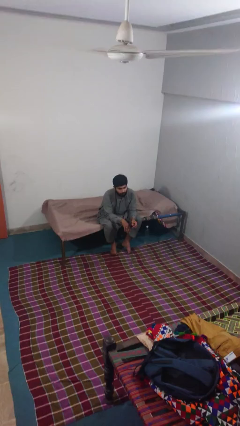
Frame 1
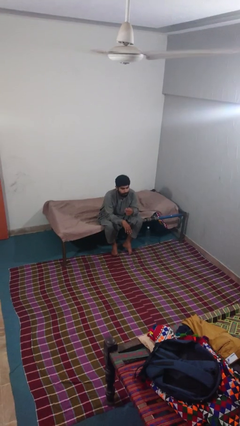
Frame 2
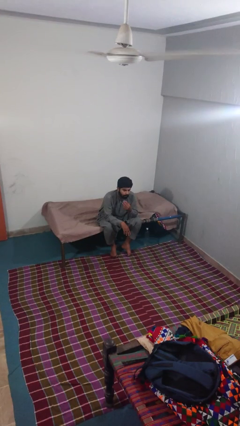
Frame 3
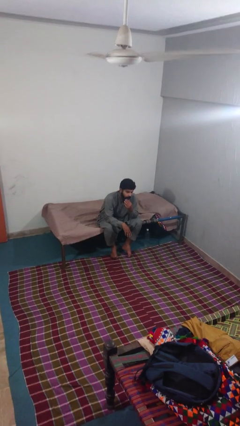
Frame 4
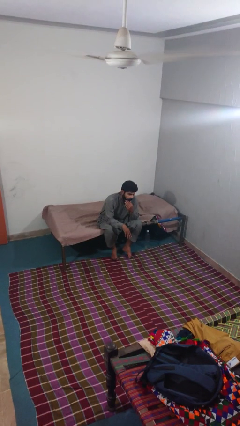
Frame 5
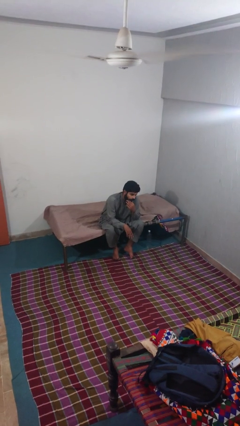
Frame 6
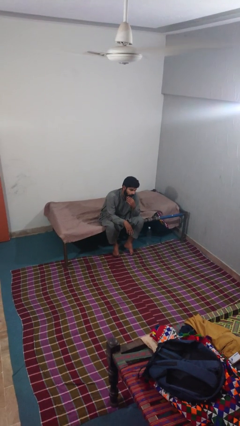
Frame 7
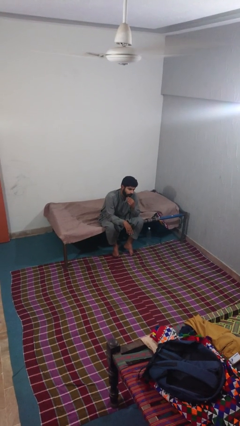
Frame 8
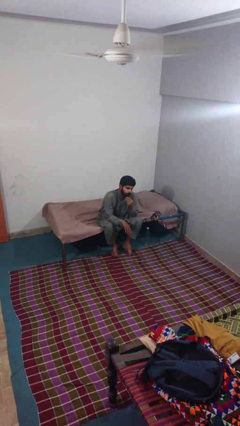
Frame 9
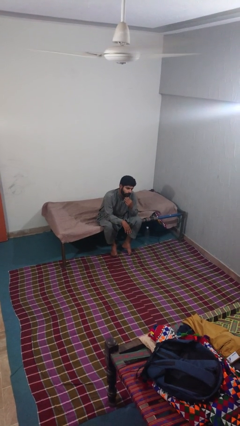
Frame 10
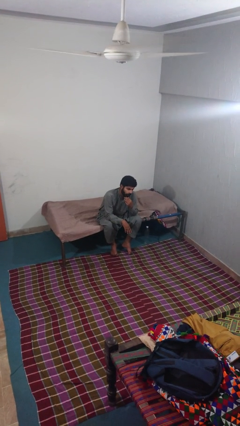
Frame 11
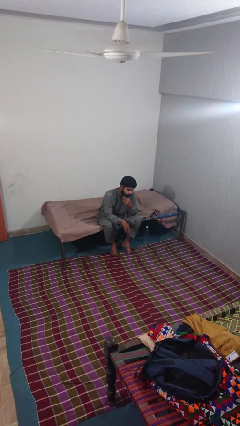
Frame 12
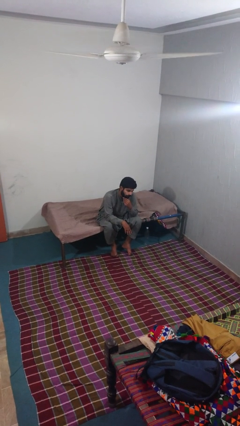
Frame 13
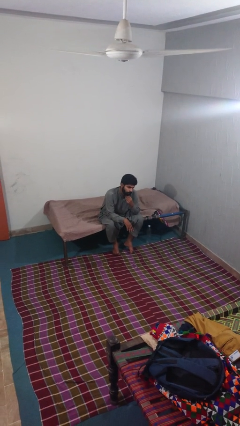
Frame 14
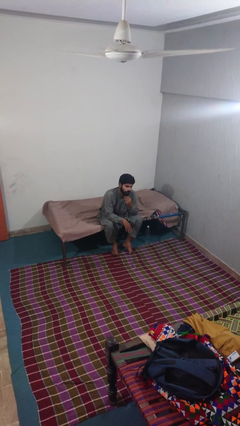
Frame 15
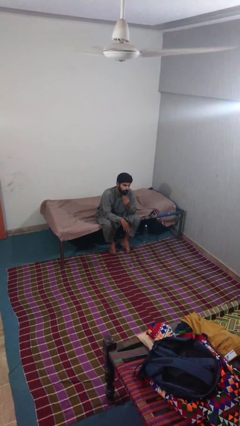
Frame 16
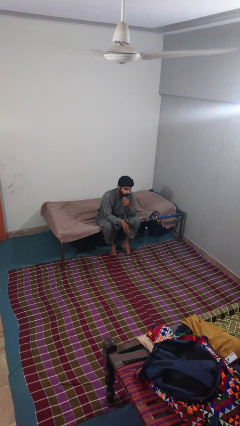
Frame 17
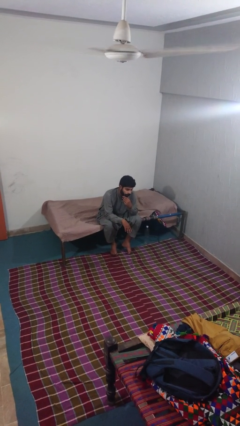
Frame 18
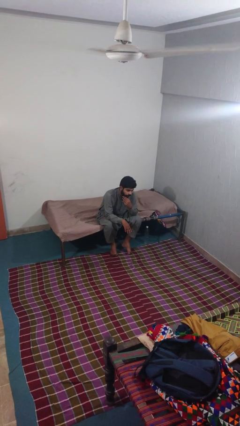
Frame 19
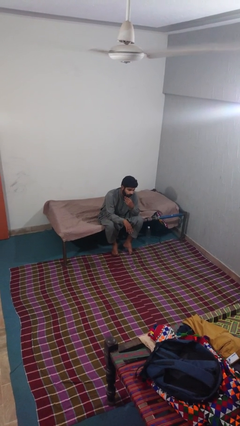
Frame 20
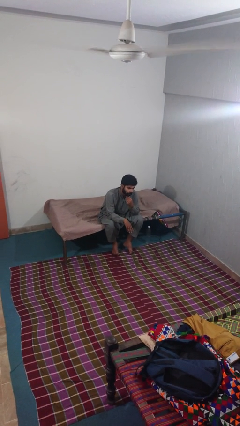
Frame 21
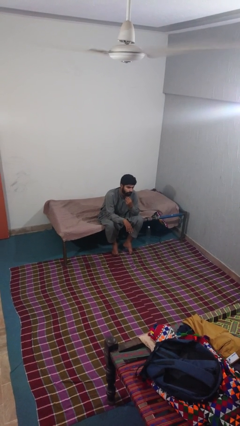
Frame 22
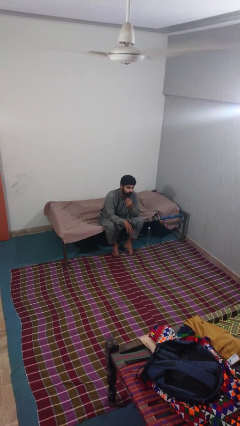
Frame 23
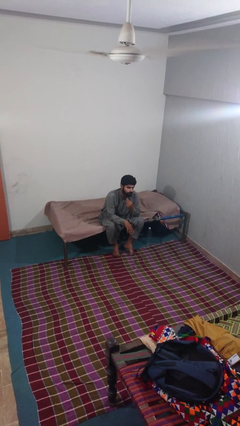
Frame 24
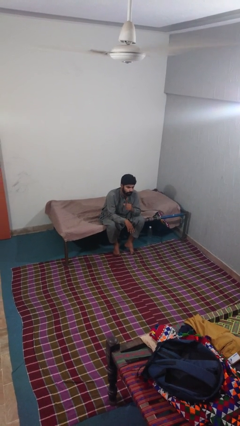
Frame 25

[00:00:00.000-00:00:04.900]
person strokes chin

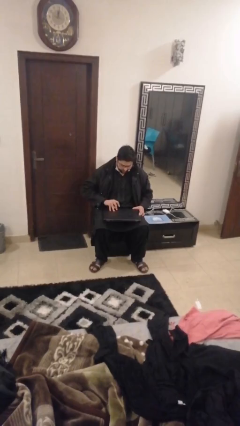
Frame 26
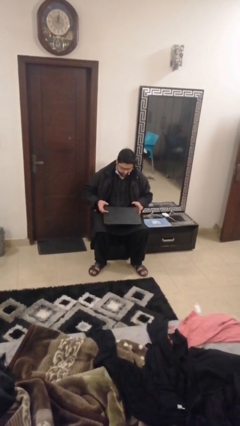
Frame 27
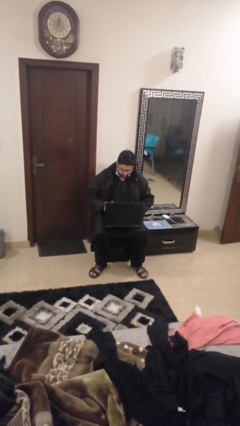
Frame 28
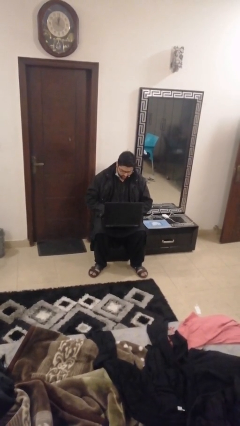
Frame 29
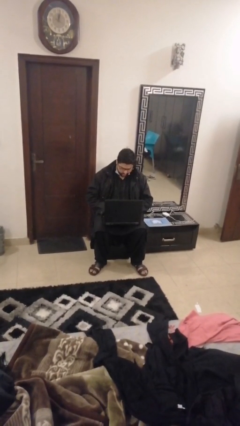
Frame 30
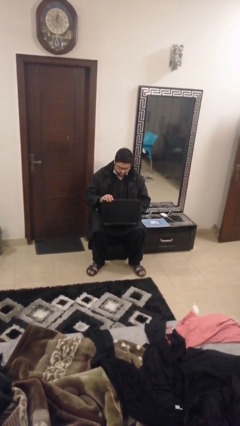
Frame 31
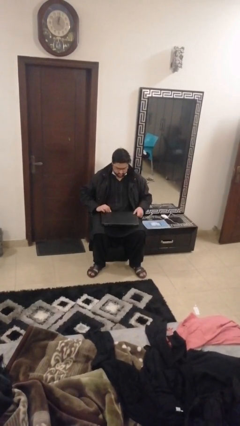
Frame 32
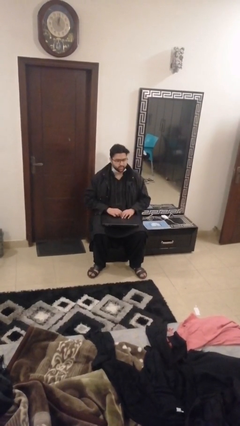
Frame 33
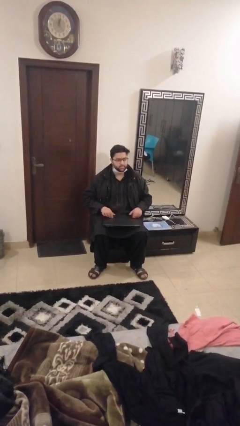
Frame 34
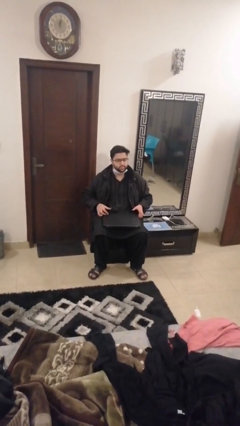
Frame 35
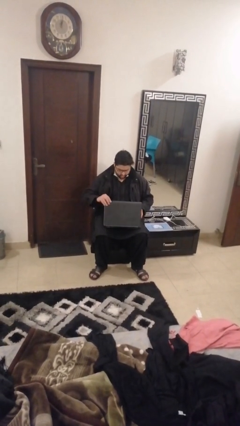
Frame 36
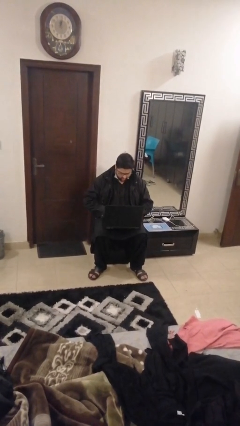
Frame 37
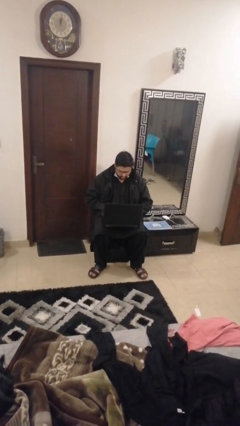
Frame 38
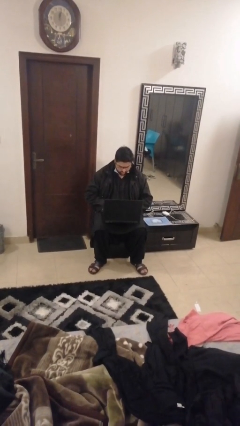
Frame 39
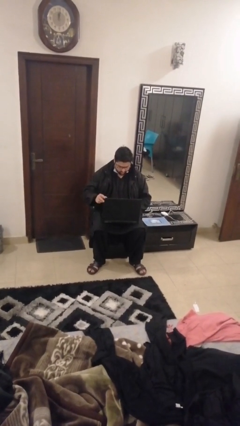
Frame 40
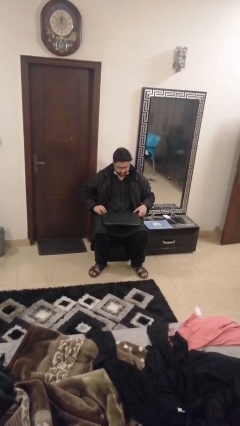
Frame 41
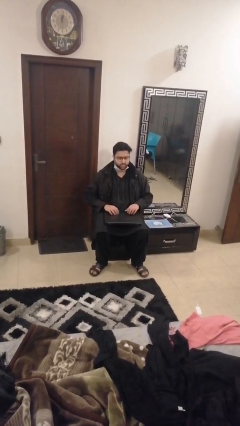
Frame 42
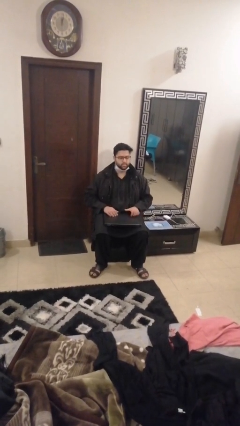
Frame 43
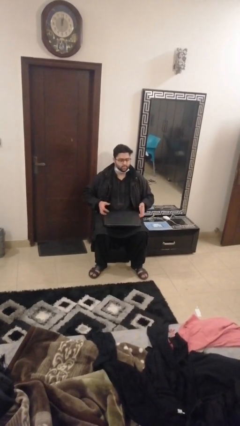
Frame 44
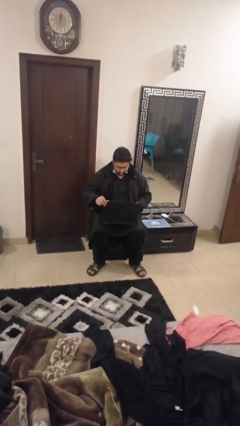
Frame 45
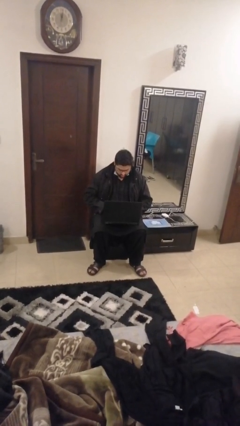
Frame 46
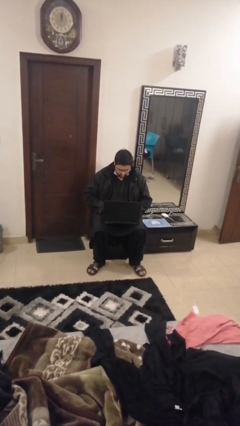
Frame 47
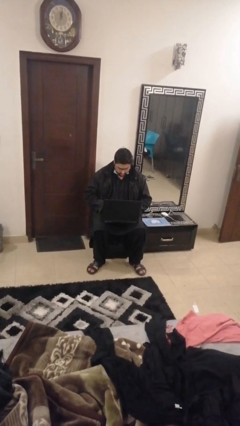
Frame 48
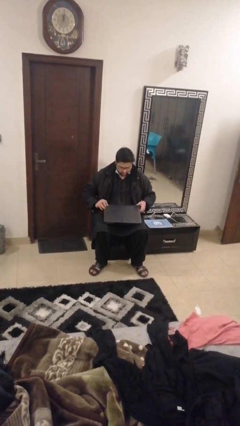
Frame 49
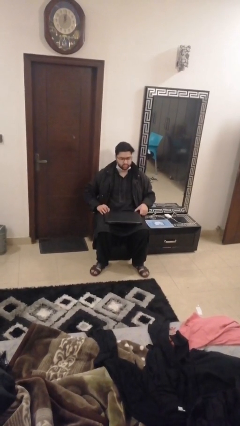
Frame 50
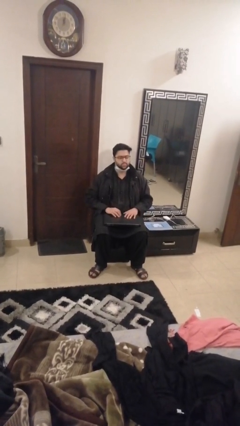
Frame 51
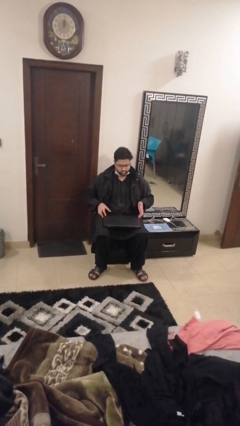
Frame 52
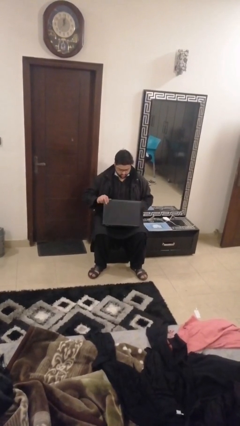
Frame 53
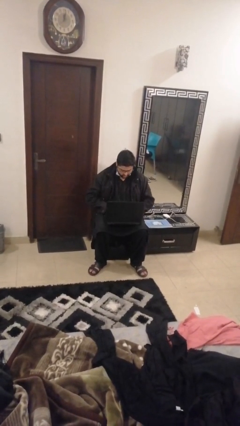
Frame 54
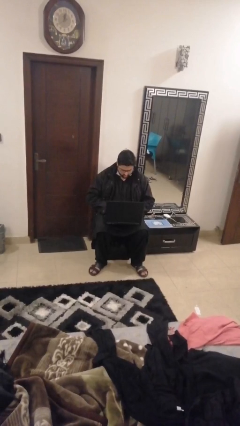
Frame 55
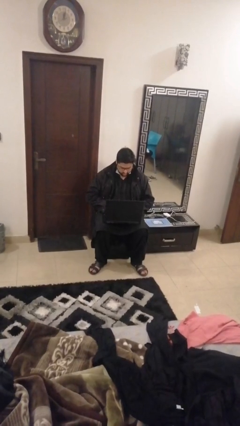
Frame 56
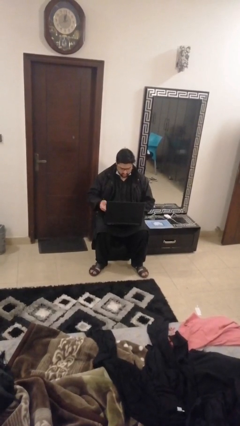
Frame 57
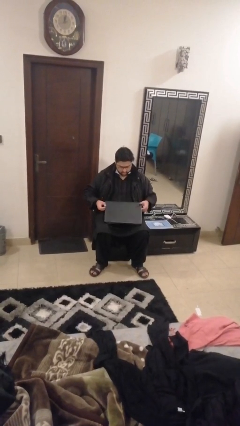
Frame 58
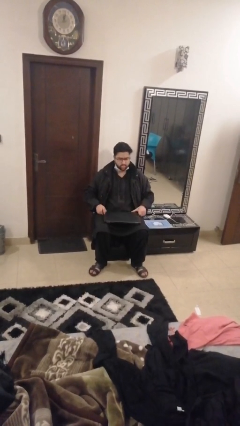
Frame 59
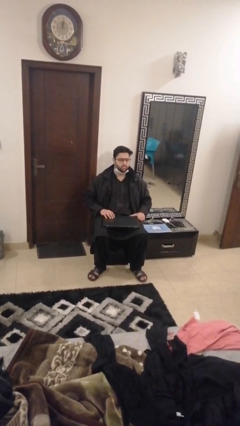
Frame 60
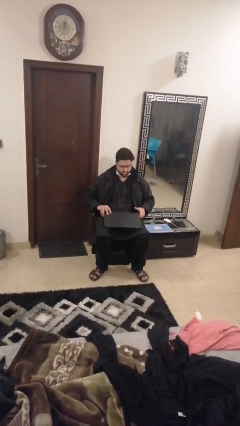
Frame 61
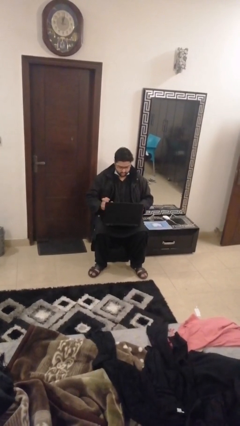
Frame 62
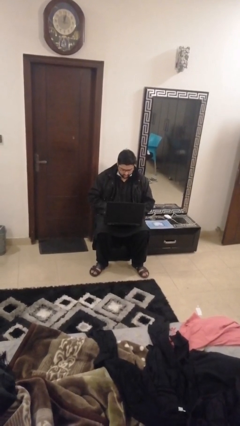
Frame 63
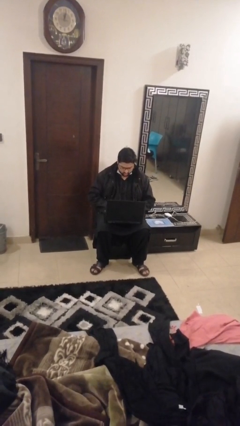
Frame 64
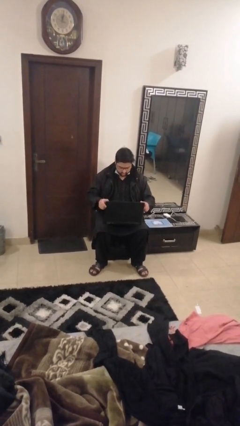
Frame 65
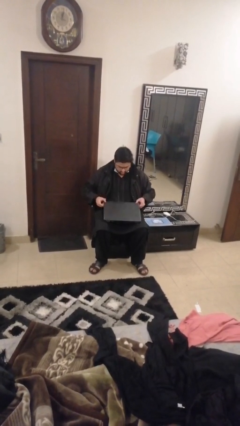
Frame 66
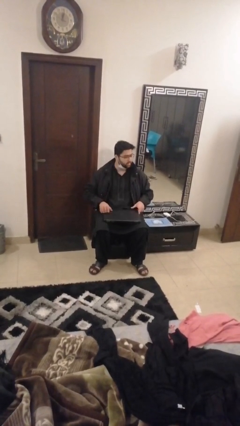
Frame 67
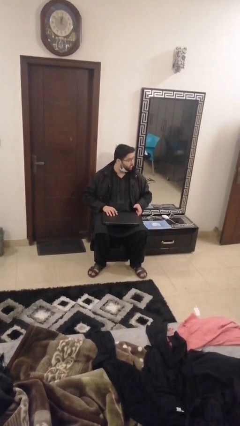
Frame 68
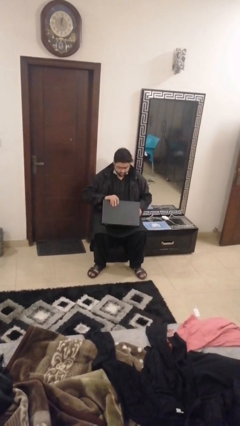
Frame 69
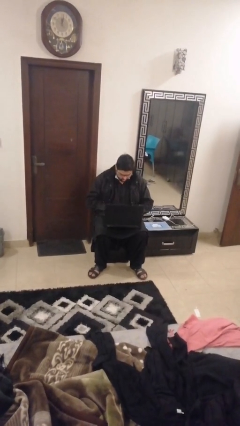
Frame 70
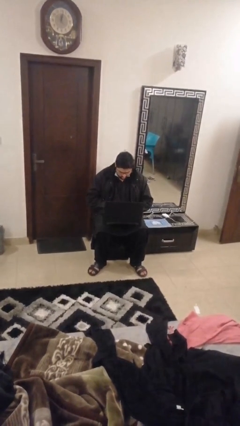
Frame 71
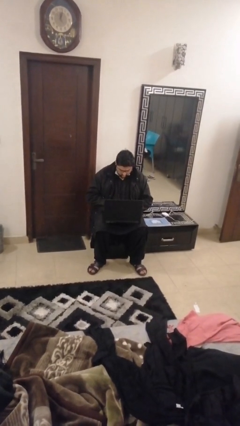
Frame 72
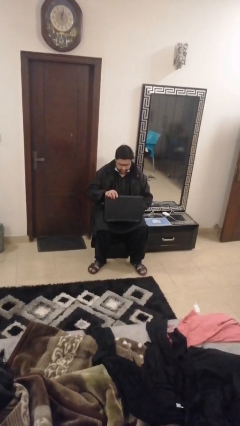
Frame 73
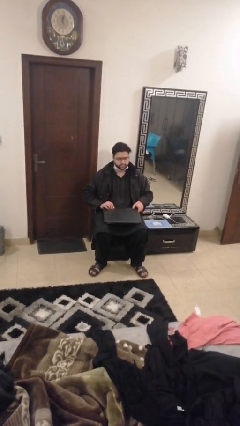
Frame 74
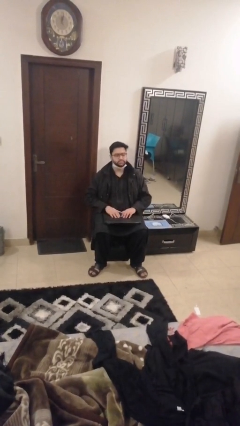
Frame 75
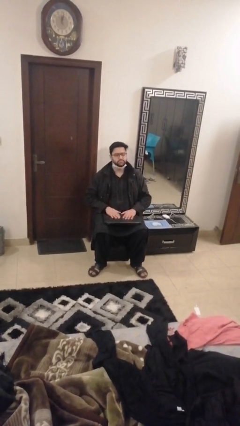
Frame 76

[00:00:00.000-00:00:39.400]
person interacts with laptop

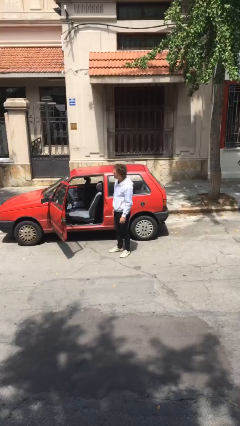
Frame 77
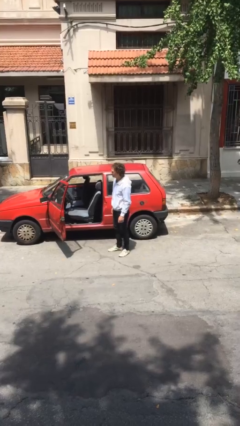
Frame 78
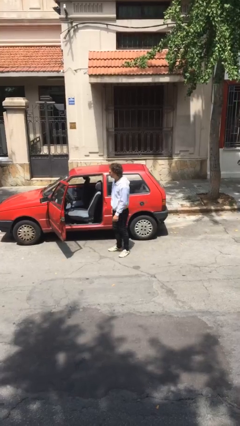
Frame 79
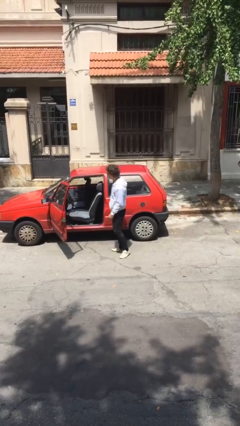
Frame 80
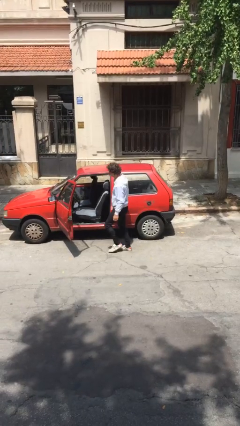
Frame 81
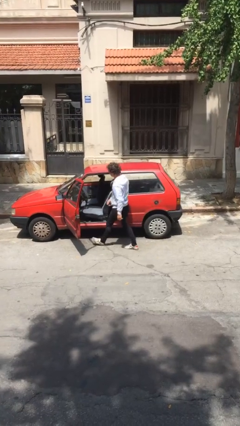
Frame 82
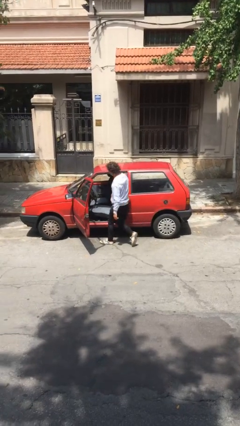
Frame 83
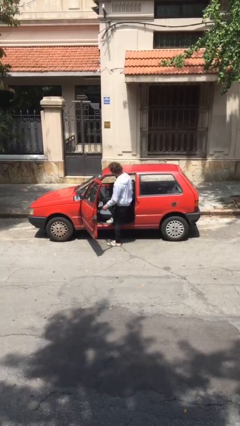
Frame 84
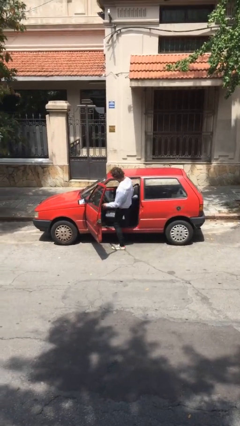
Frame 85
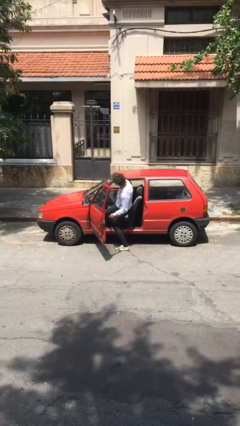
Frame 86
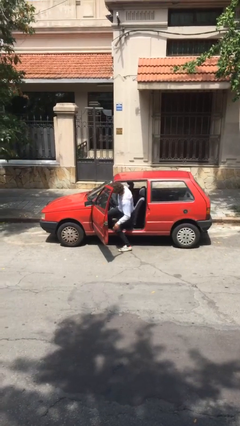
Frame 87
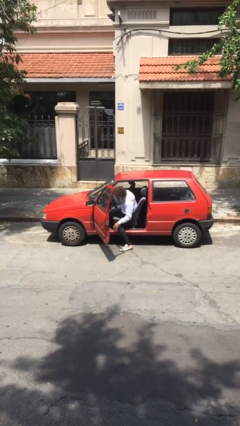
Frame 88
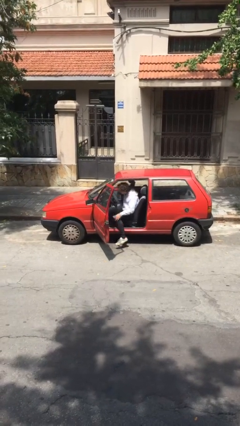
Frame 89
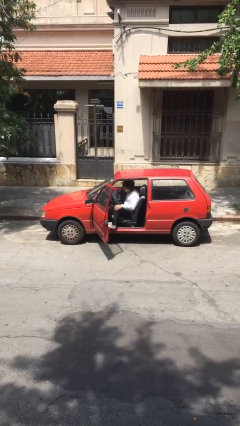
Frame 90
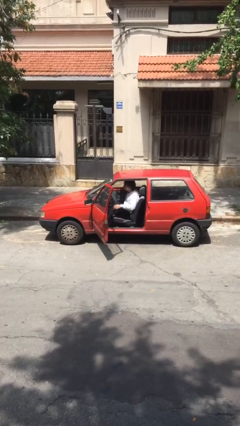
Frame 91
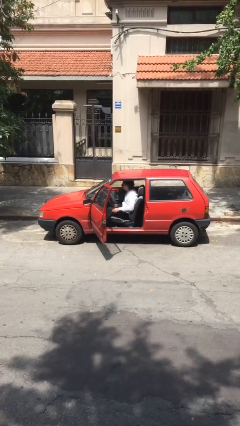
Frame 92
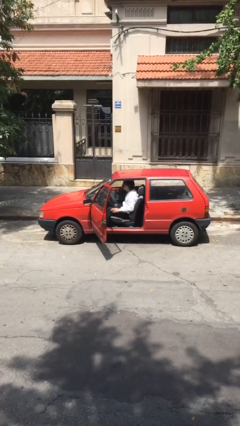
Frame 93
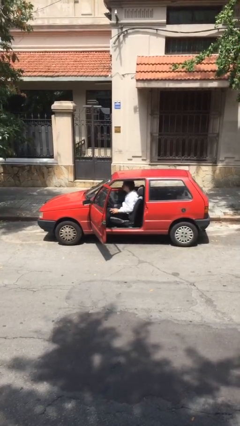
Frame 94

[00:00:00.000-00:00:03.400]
person enters car
